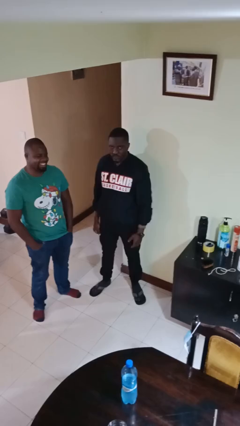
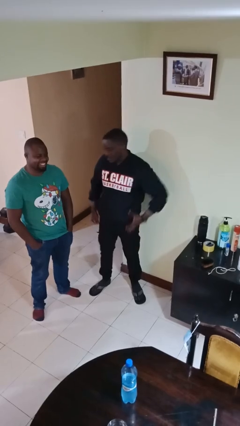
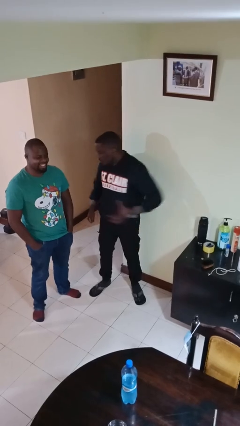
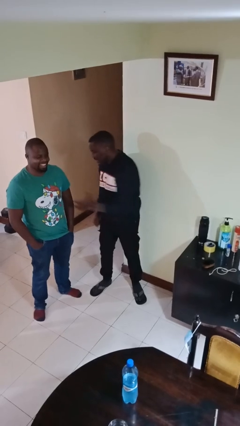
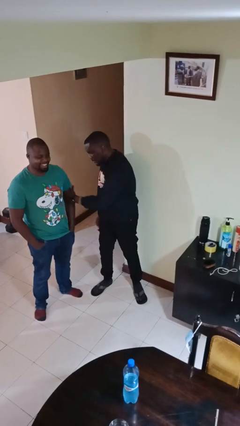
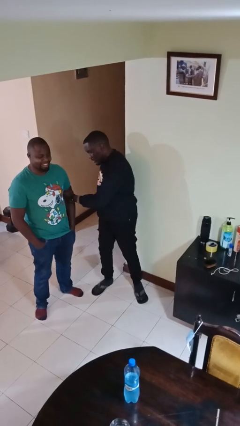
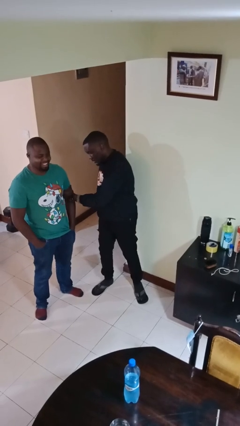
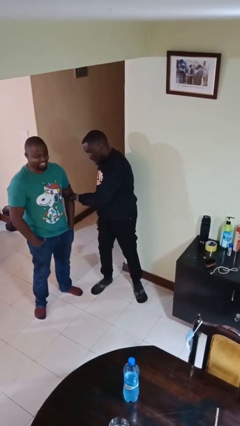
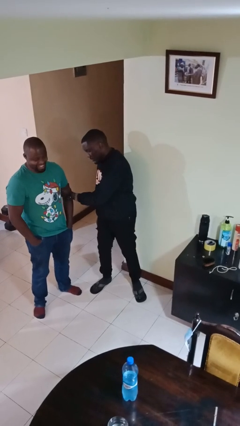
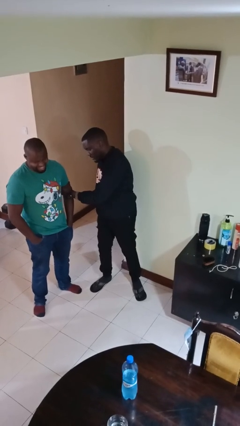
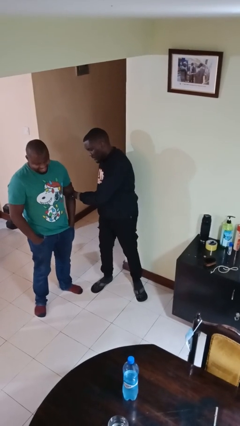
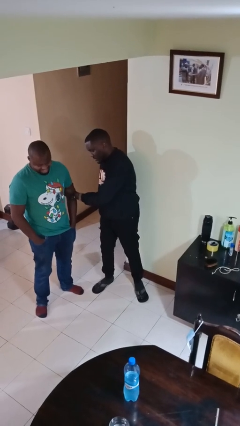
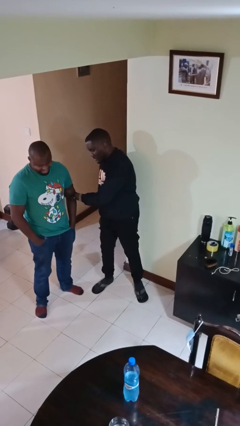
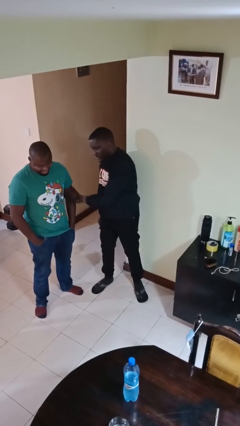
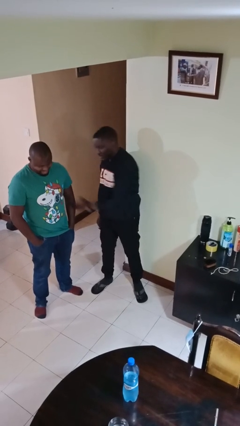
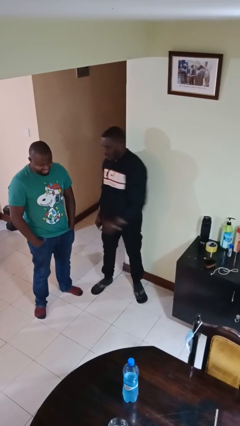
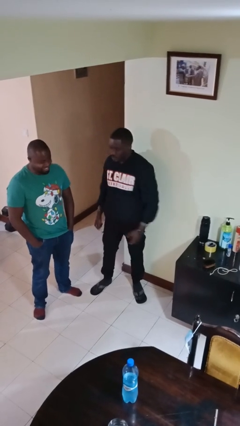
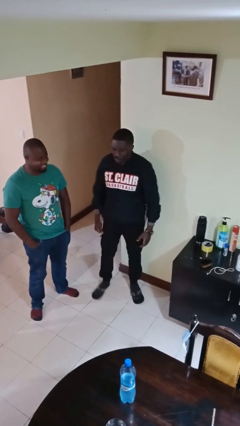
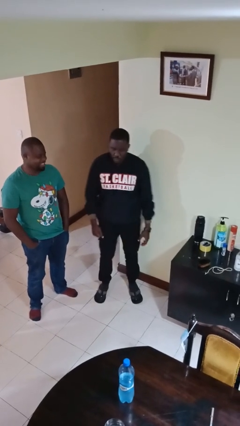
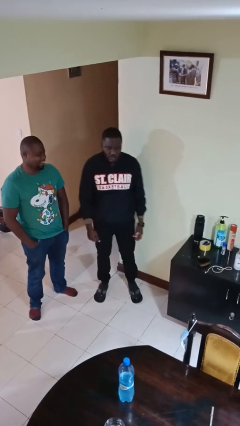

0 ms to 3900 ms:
person grabs person by bicep

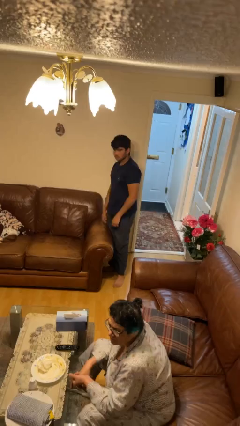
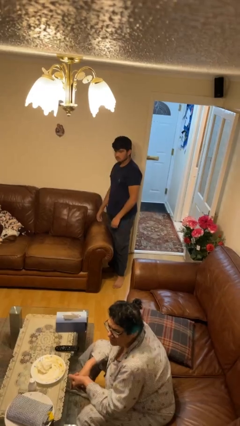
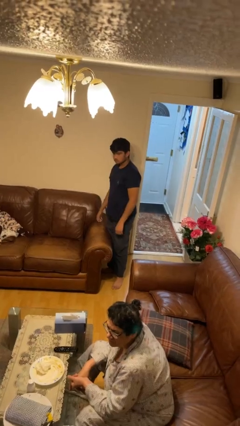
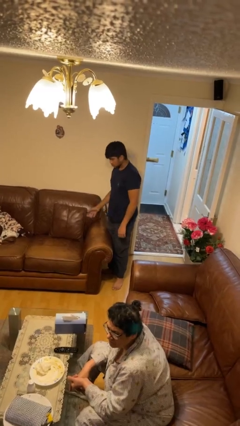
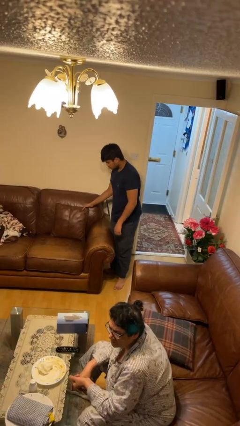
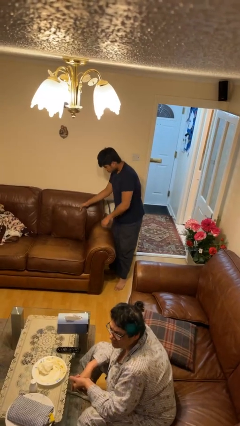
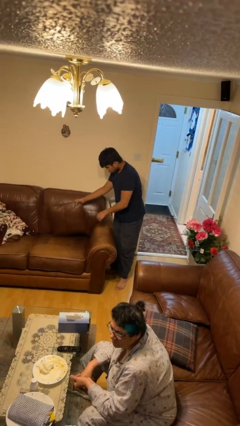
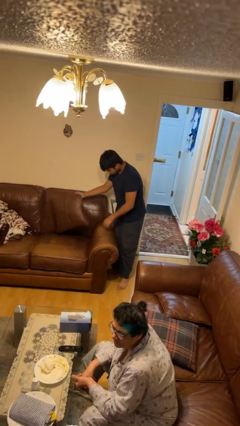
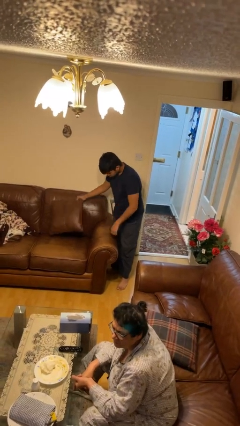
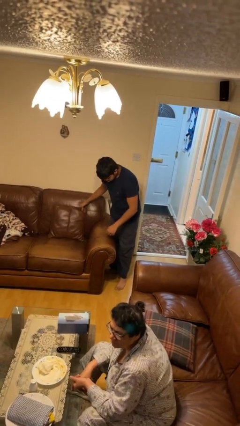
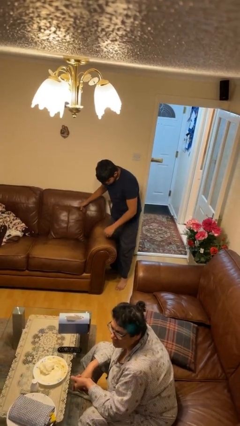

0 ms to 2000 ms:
person searches in couch

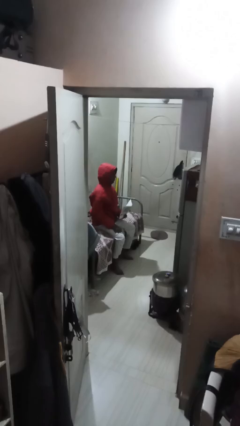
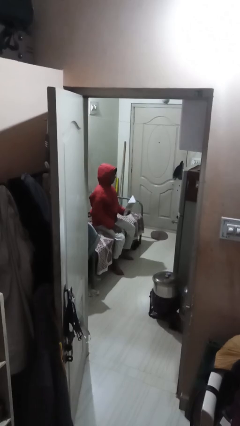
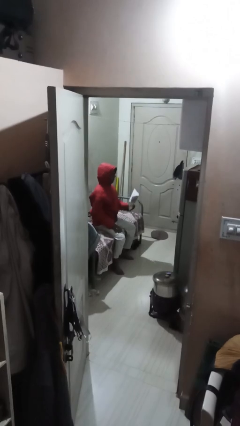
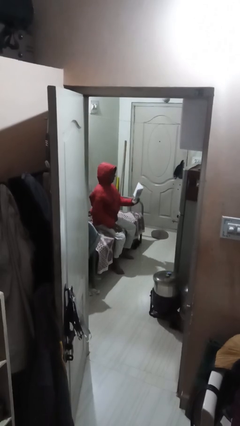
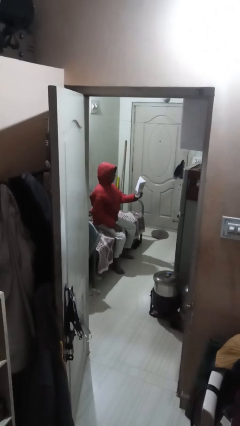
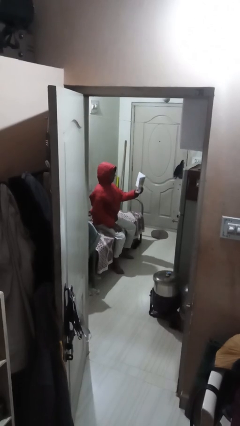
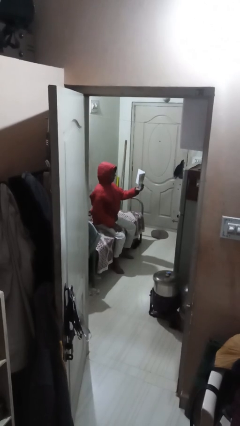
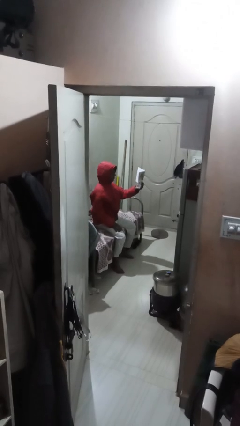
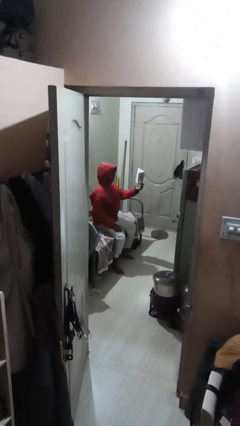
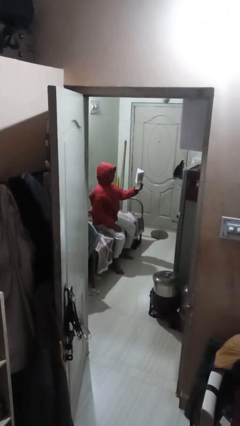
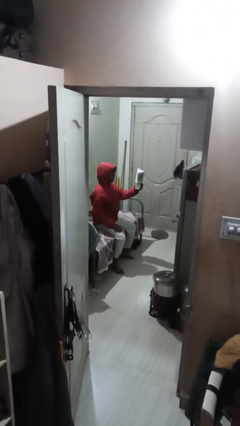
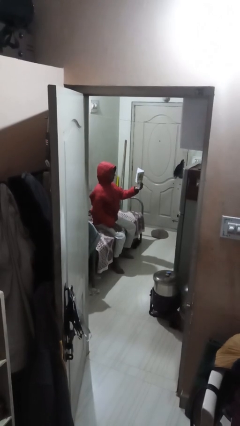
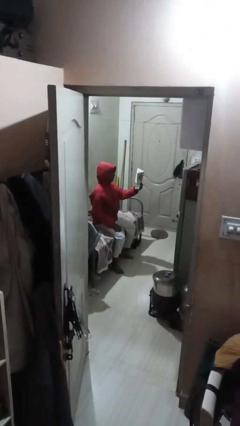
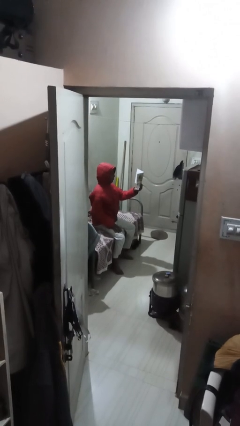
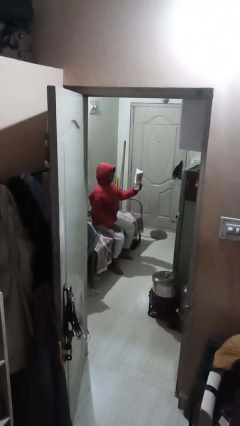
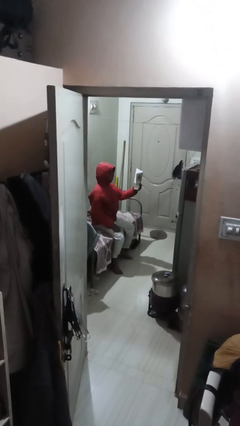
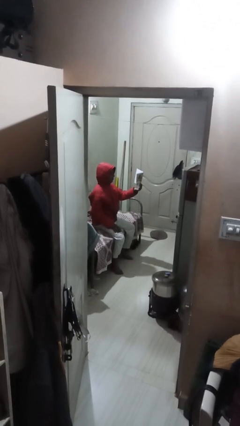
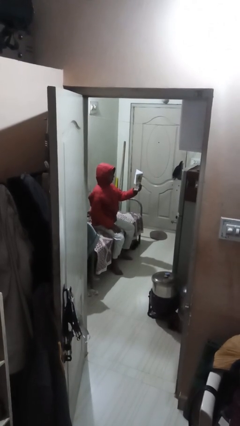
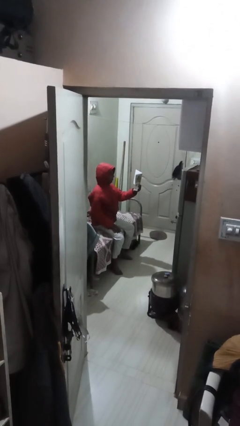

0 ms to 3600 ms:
person reads document

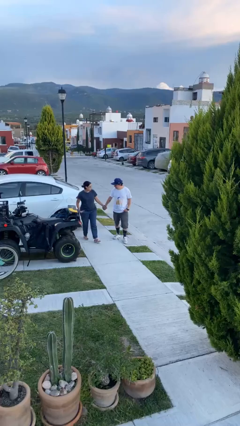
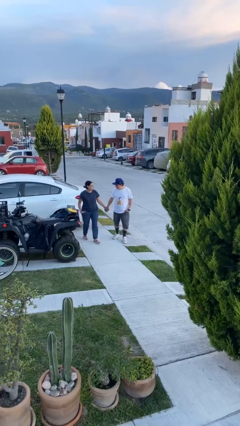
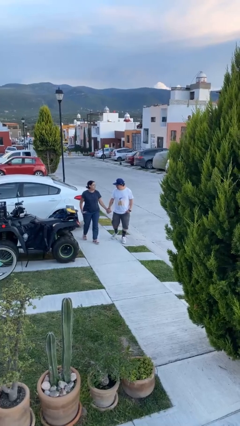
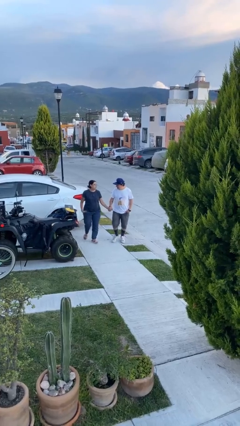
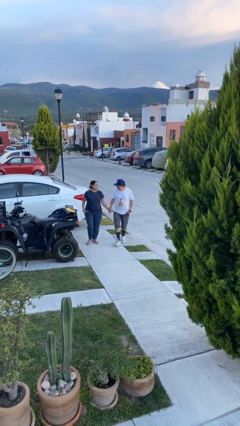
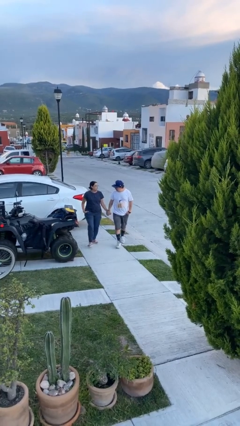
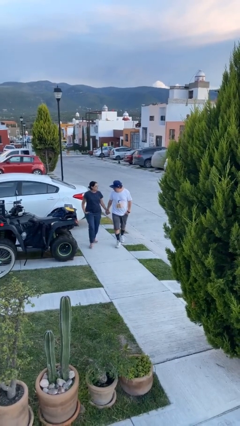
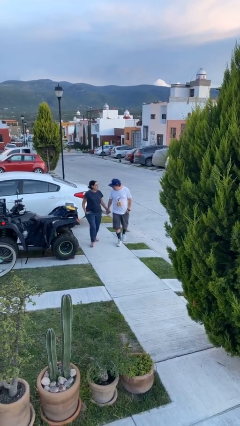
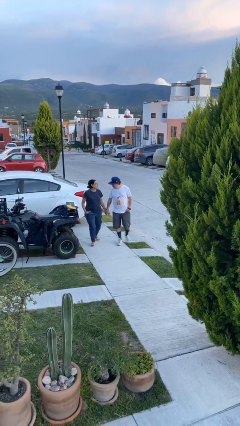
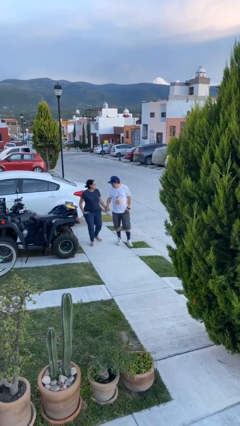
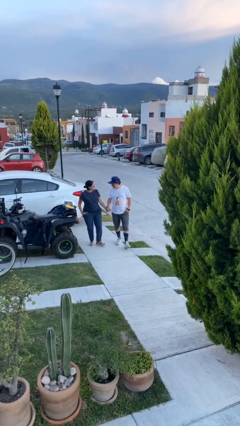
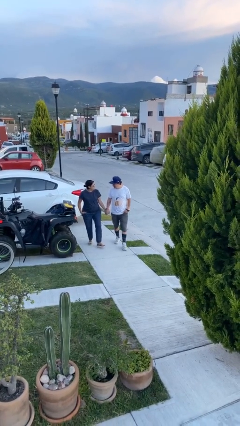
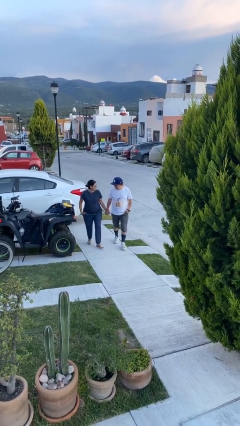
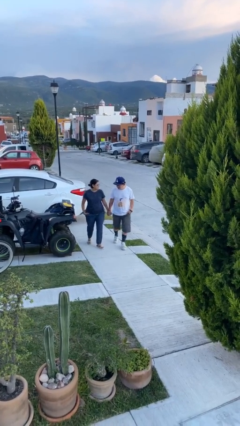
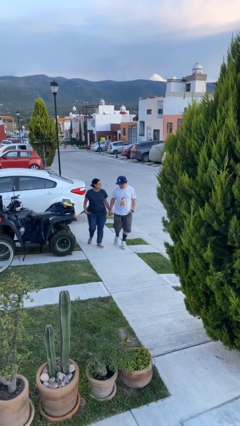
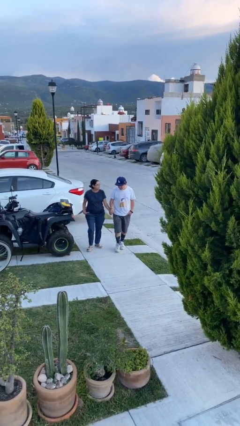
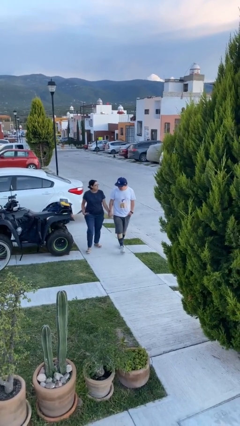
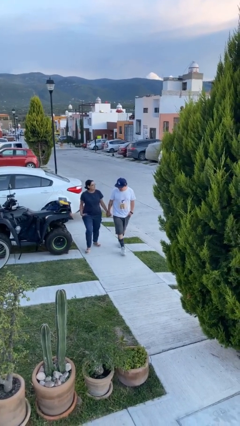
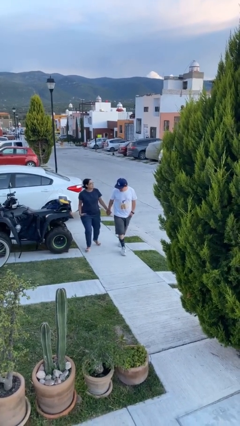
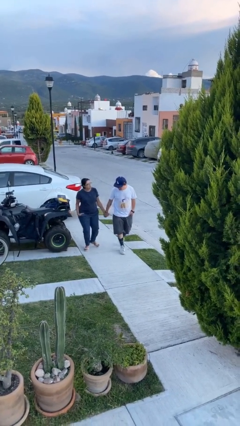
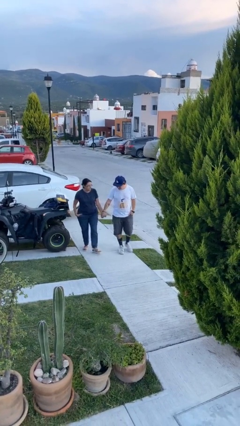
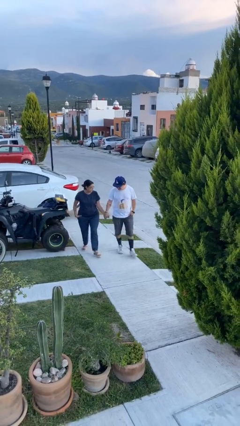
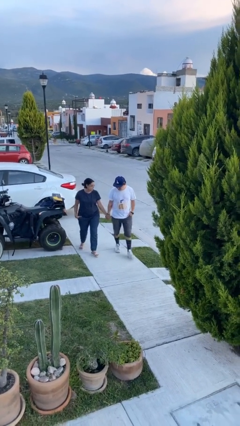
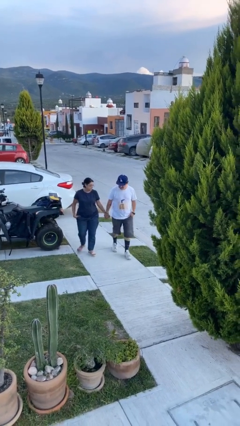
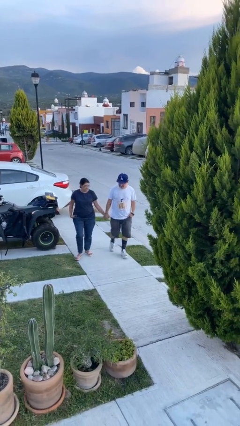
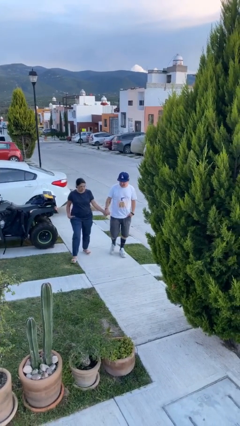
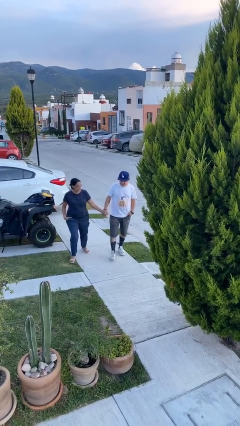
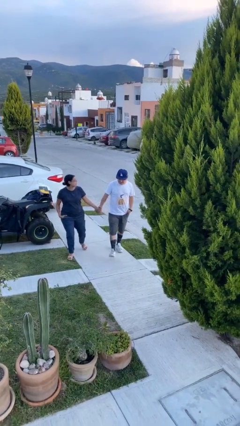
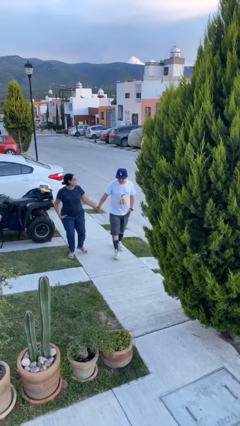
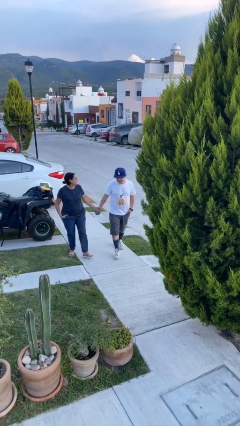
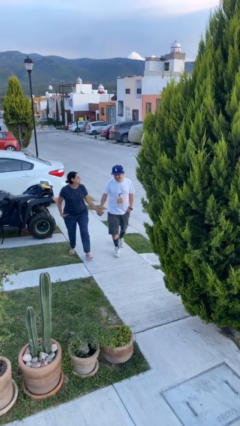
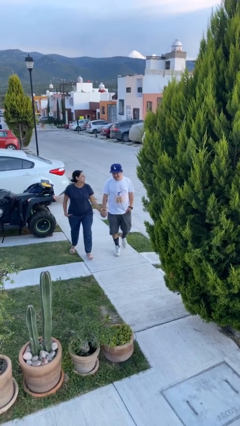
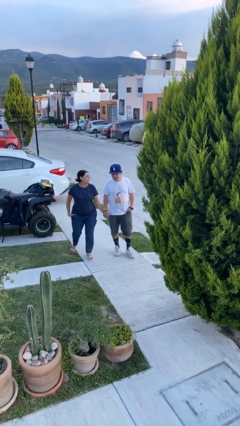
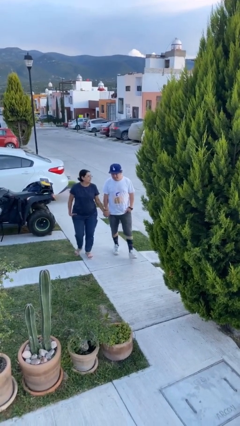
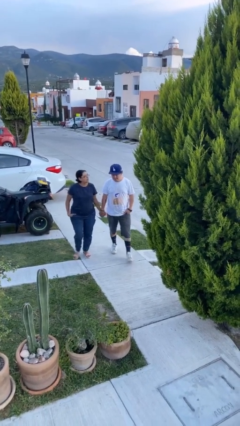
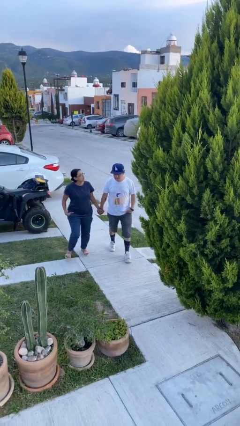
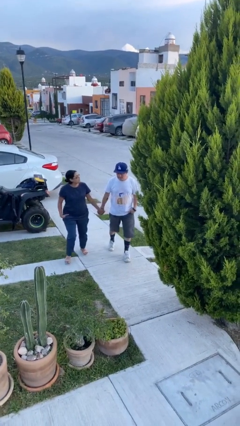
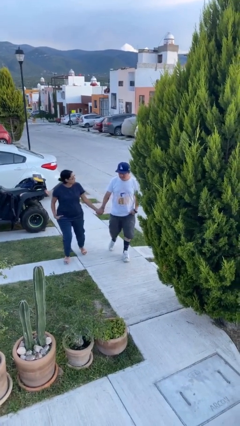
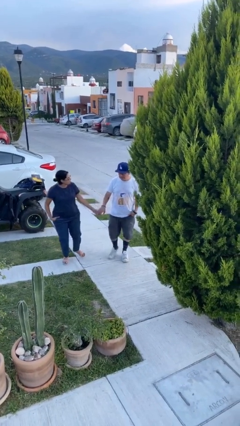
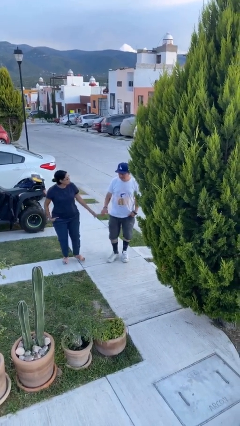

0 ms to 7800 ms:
person holds hand

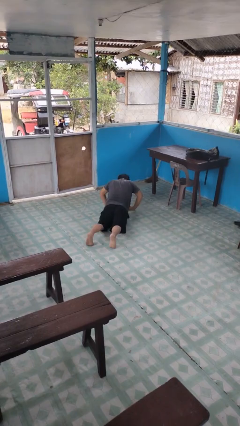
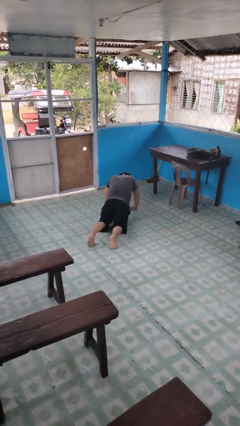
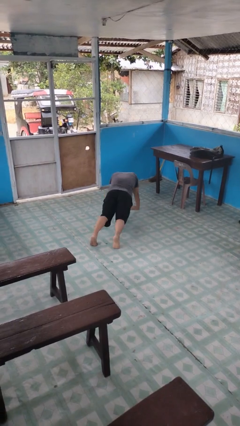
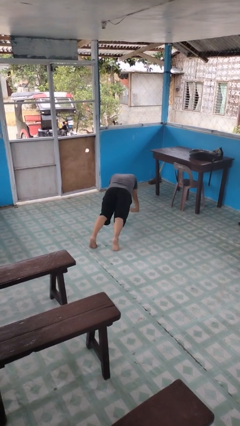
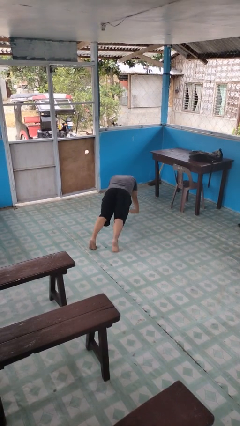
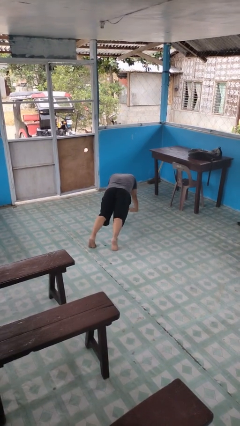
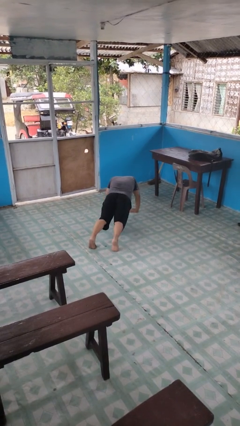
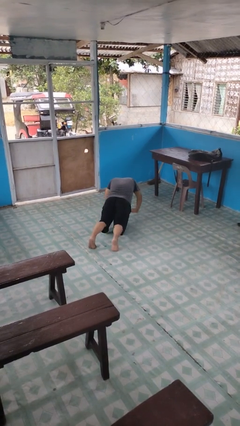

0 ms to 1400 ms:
person exercises with pushup
